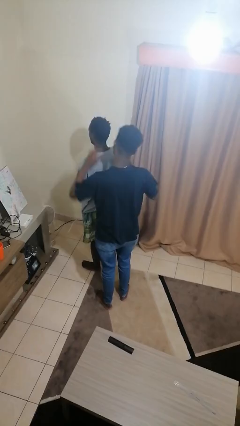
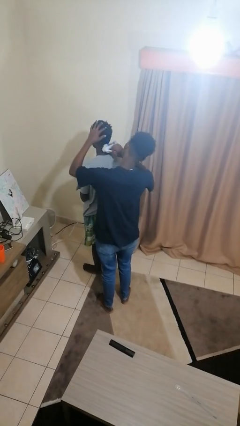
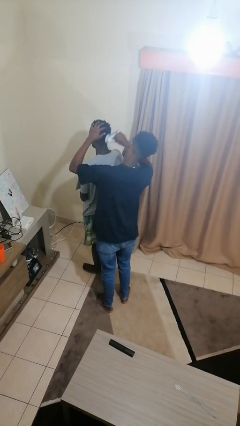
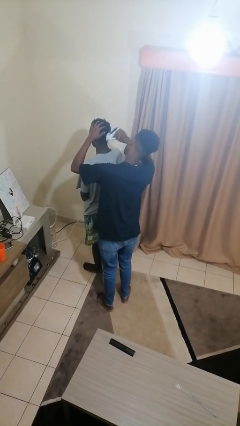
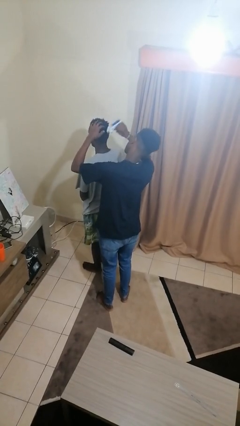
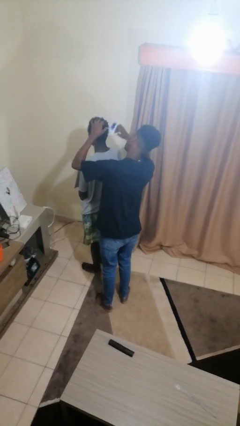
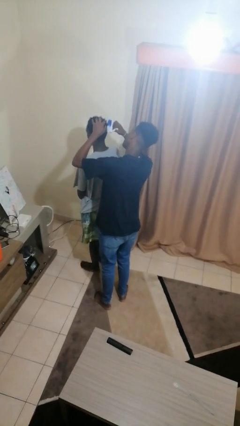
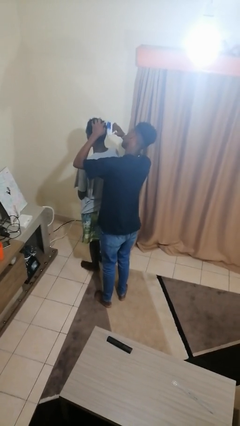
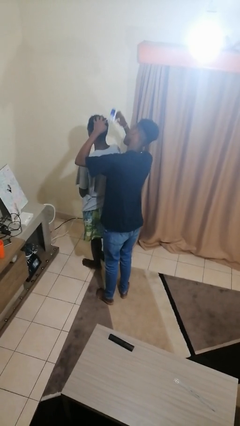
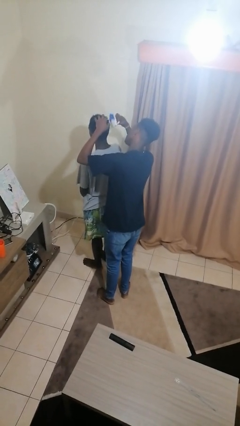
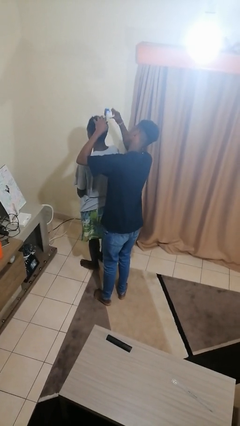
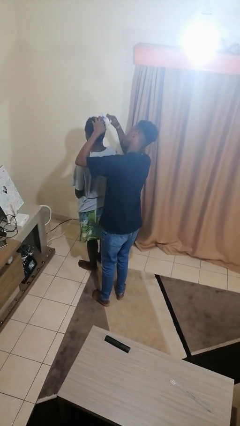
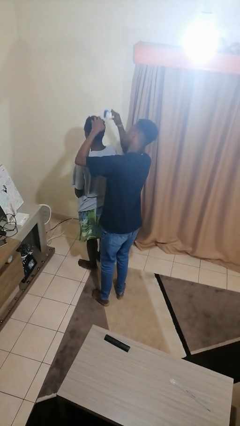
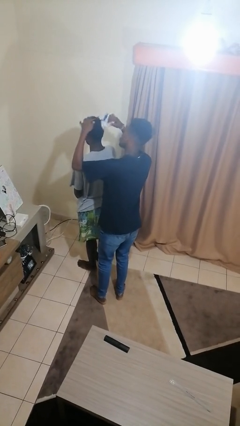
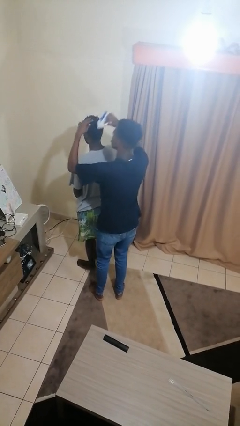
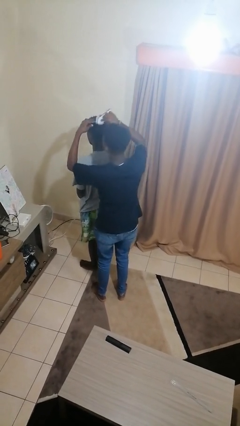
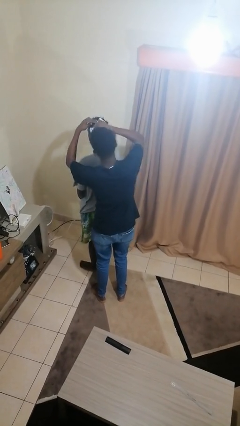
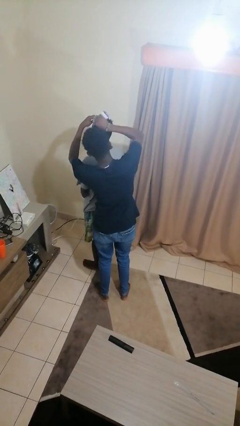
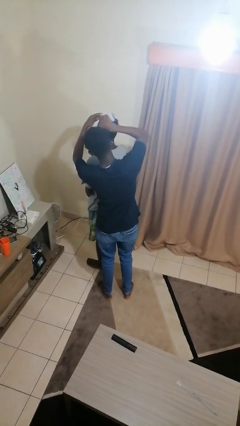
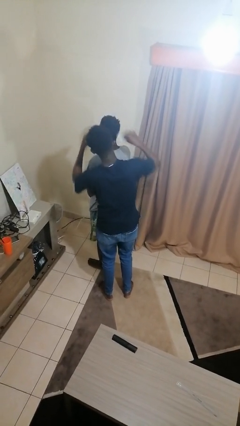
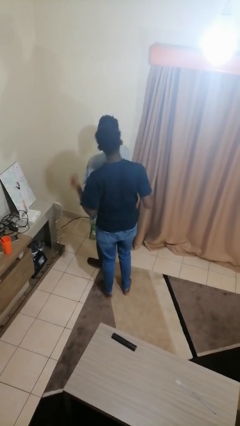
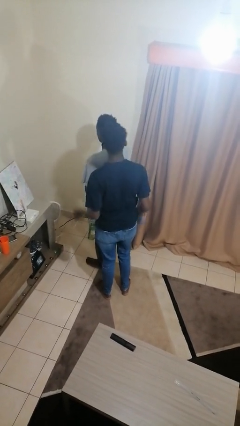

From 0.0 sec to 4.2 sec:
person brushes hair of person

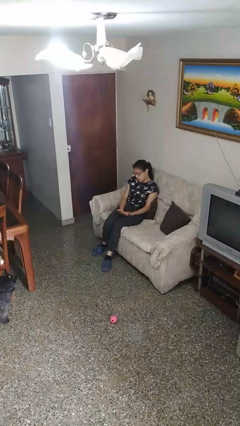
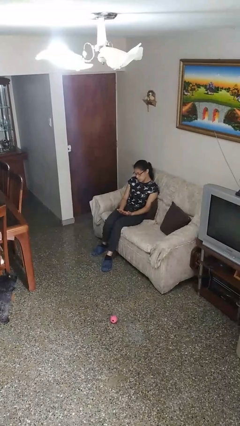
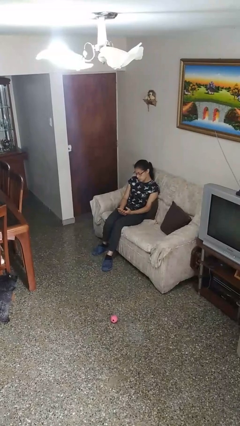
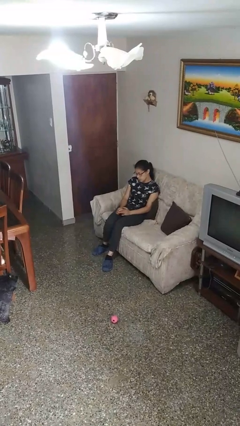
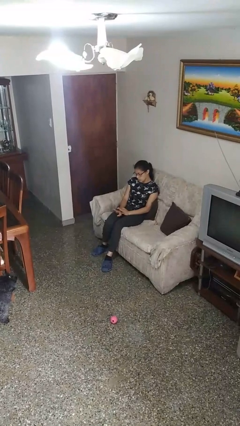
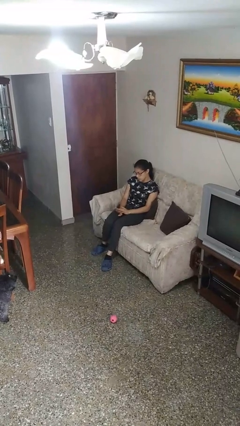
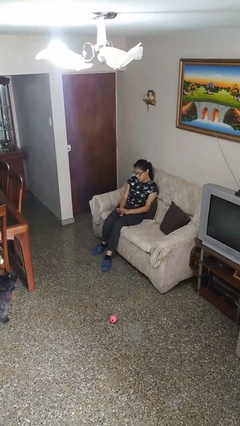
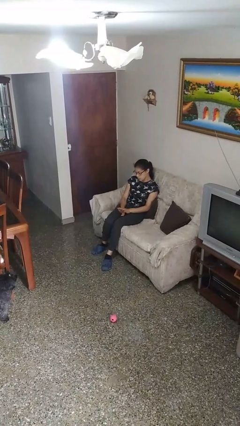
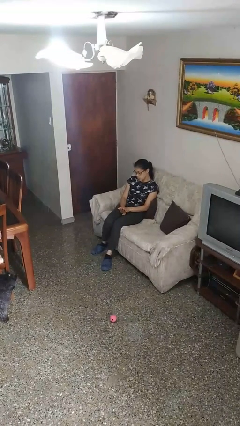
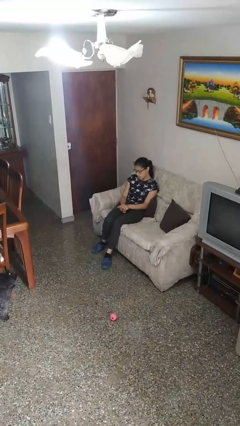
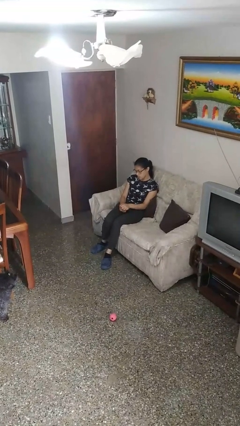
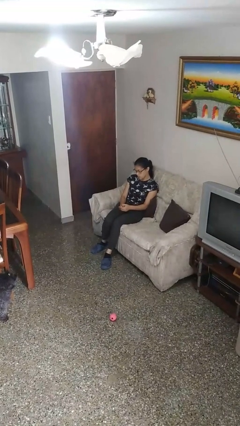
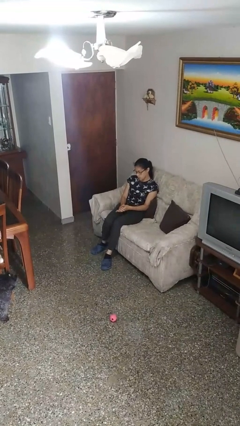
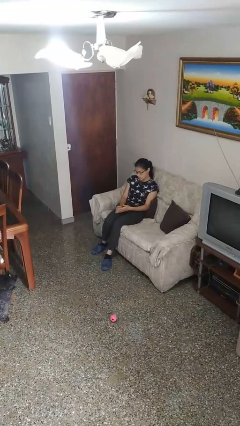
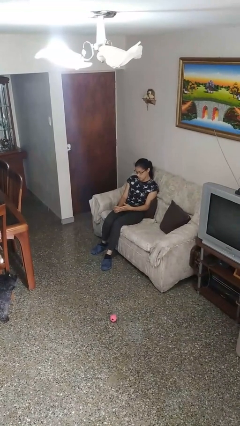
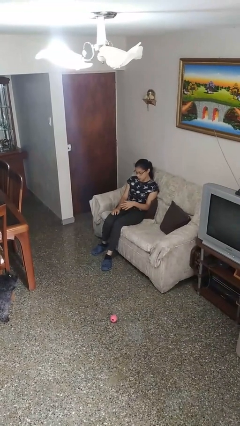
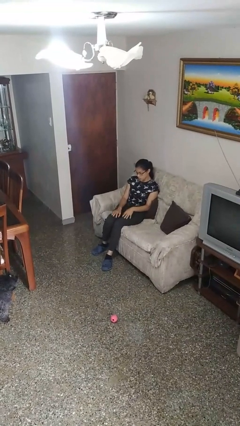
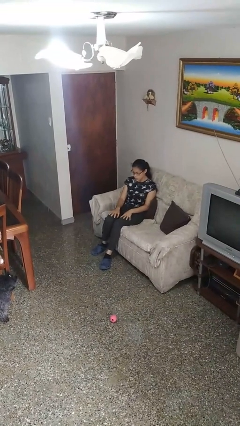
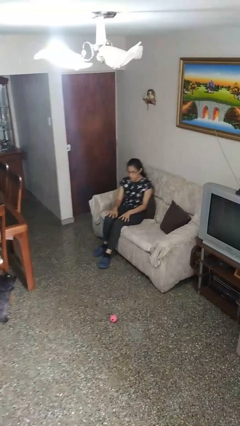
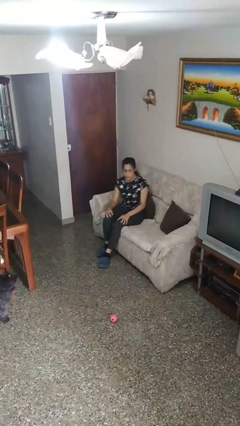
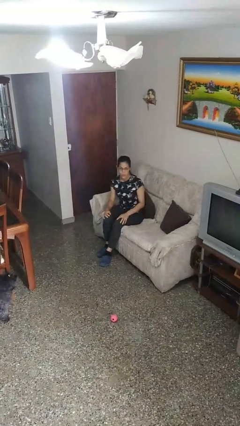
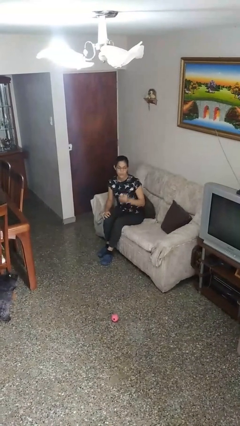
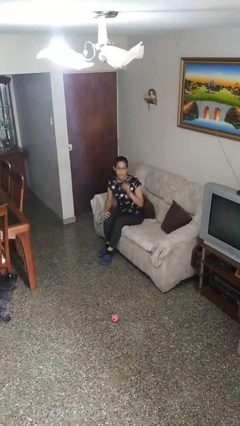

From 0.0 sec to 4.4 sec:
person looks at hands in lap

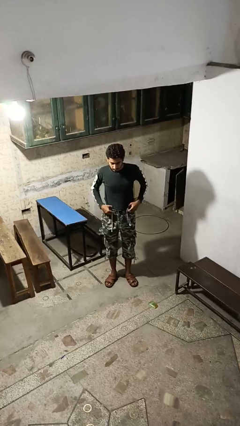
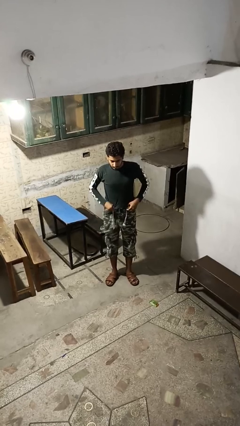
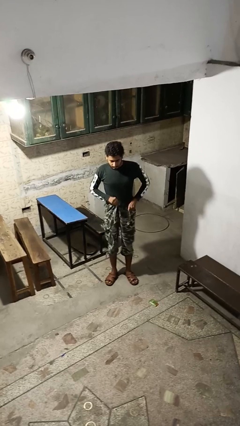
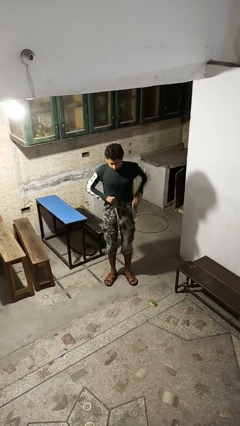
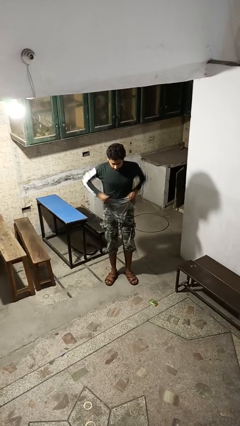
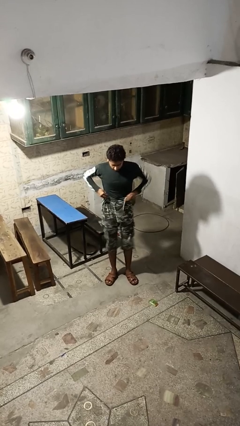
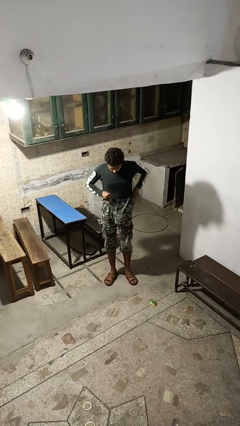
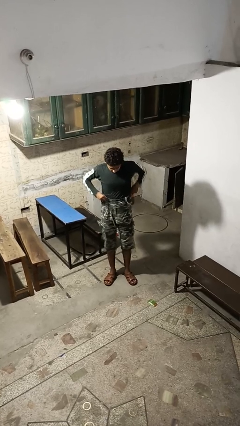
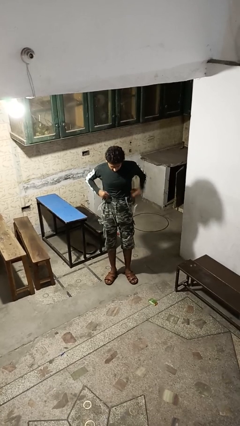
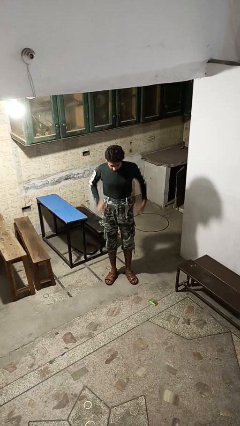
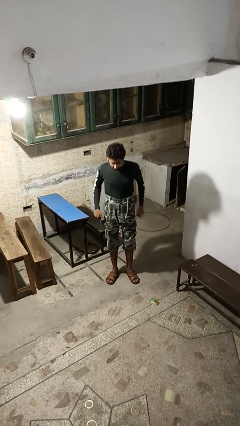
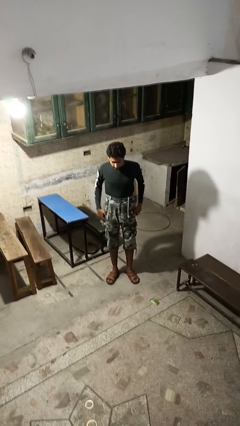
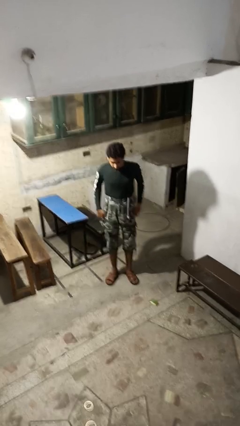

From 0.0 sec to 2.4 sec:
person hikes up pants

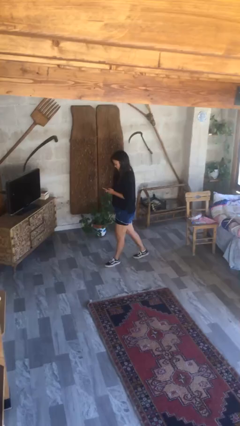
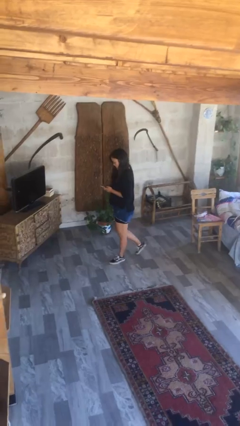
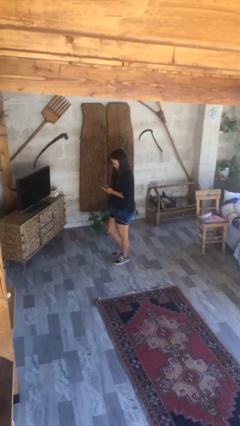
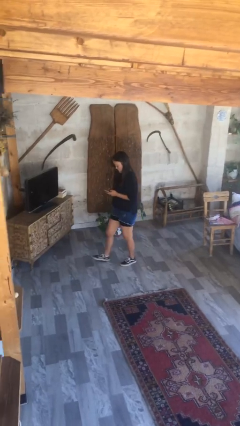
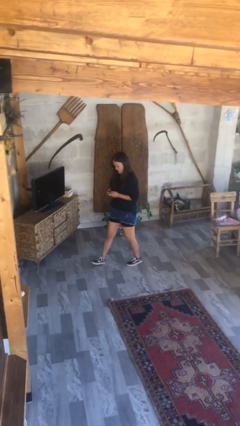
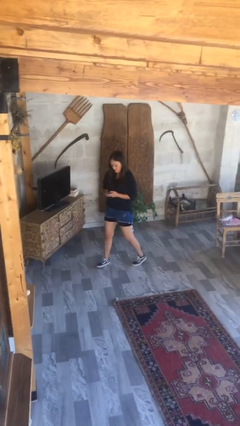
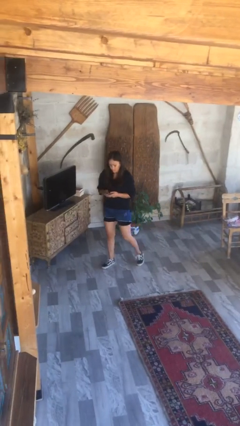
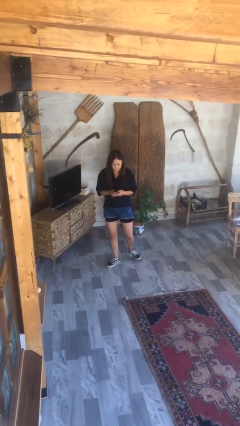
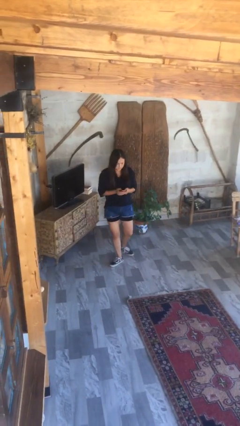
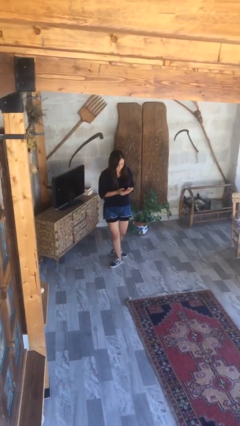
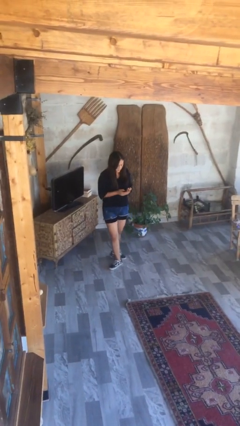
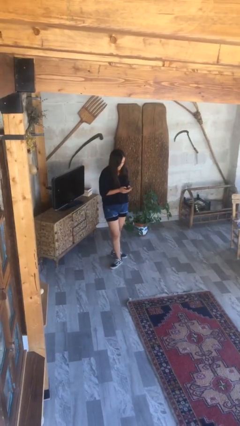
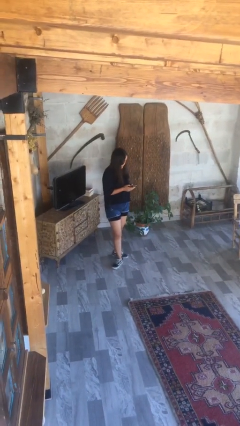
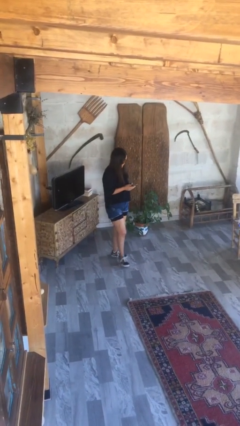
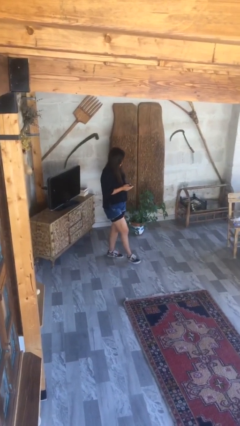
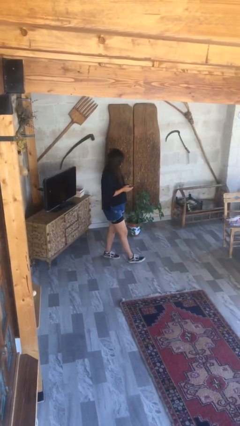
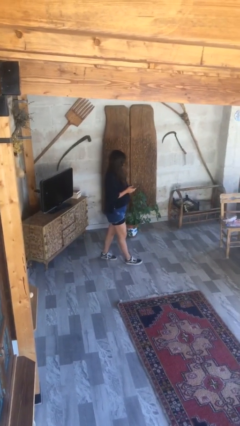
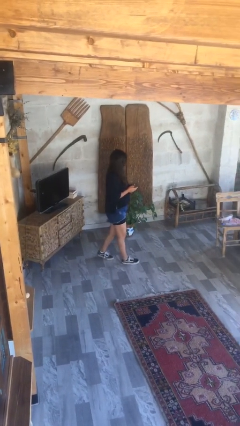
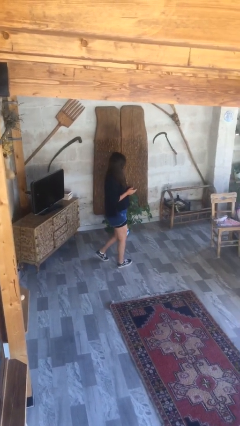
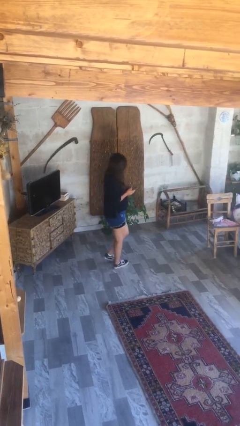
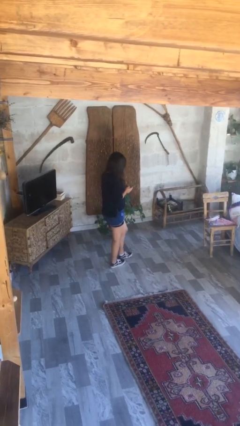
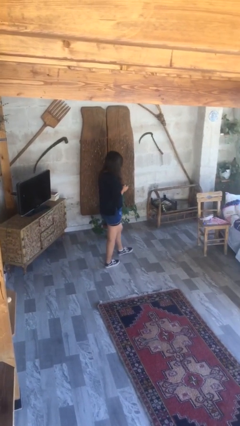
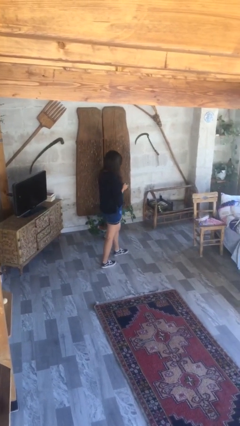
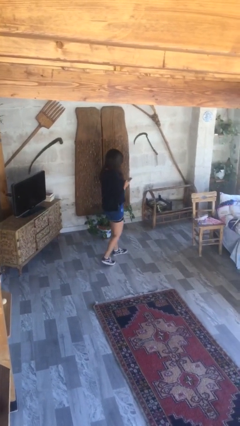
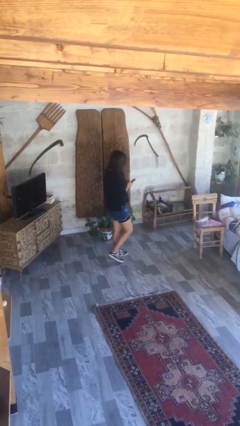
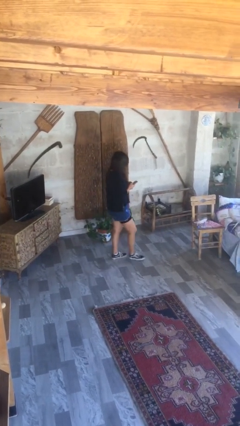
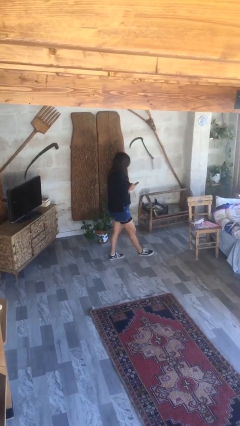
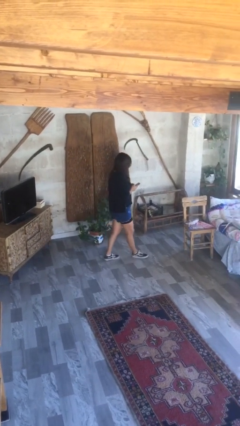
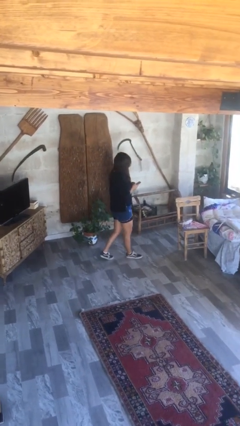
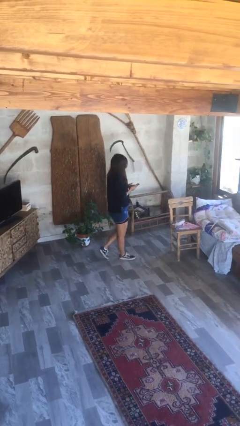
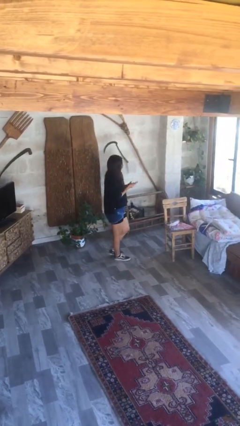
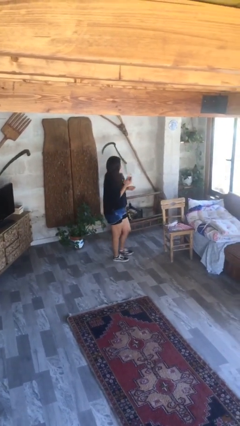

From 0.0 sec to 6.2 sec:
person texts on phone

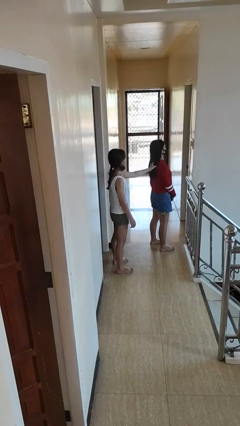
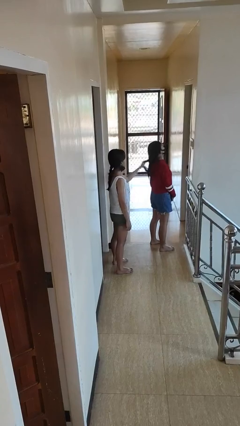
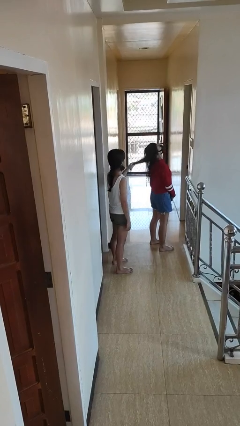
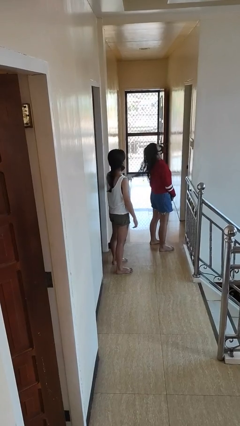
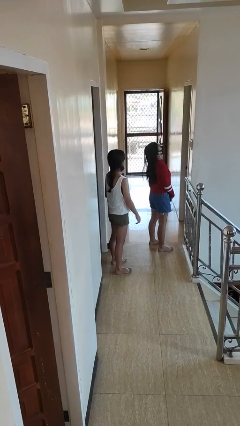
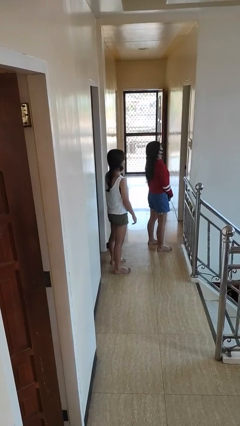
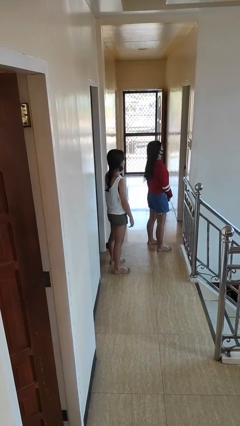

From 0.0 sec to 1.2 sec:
person grabs person by hair
